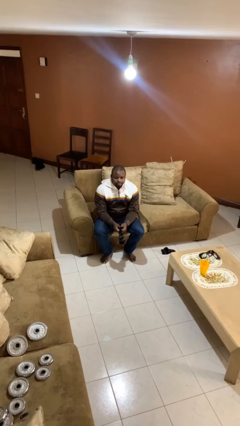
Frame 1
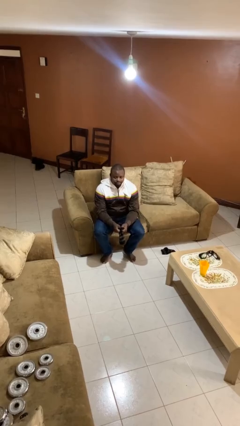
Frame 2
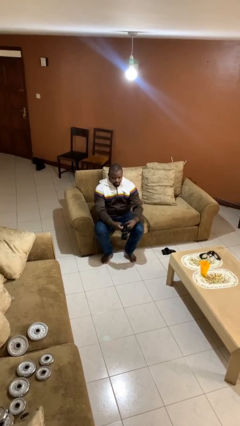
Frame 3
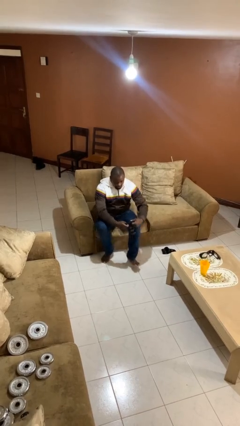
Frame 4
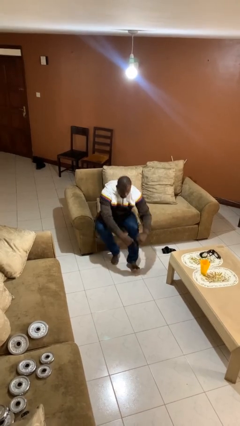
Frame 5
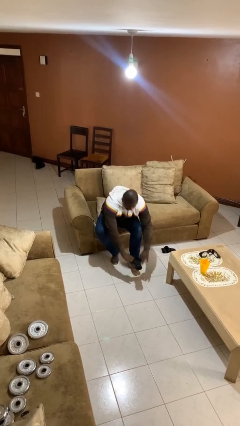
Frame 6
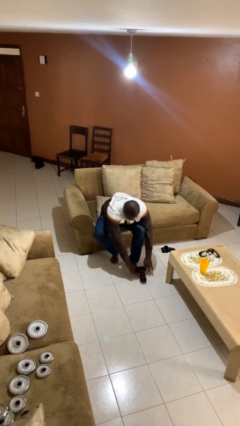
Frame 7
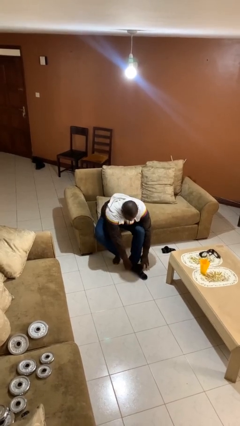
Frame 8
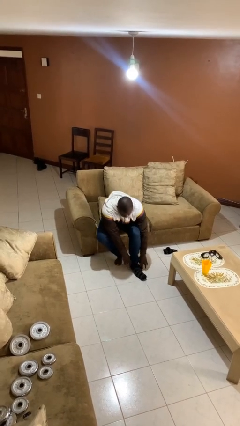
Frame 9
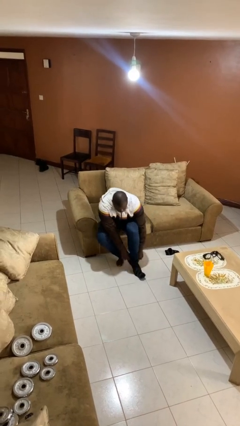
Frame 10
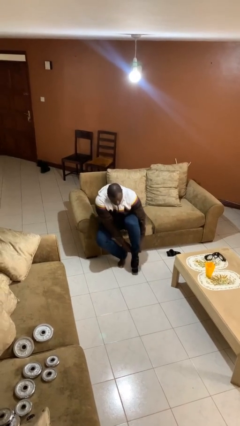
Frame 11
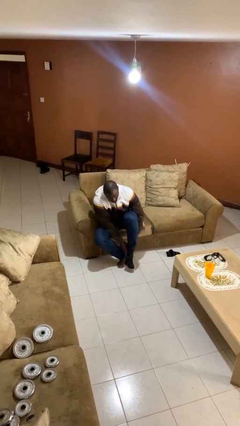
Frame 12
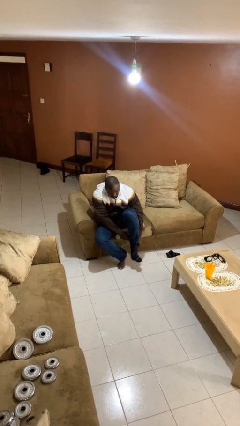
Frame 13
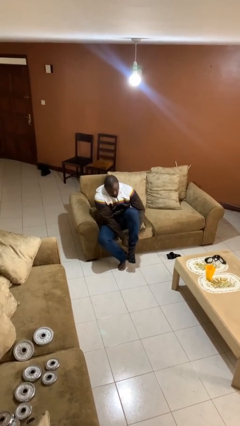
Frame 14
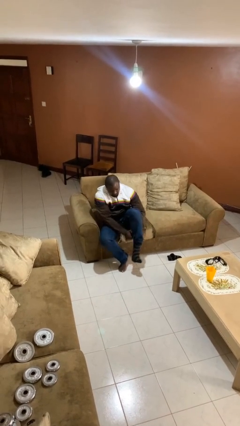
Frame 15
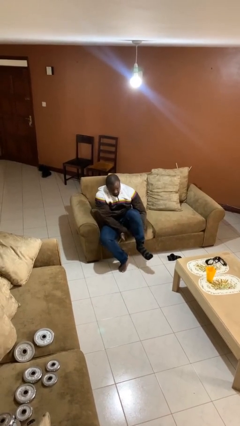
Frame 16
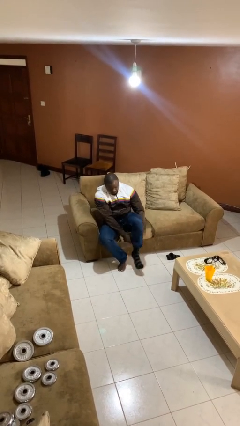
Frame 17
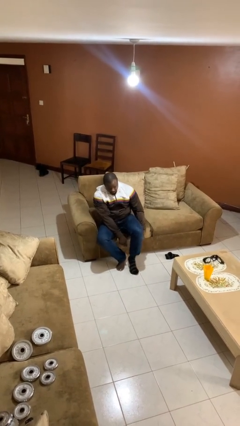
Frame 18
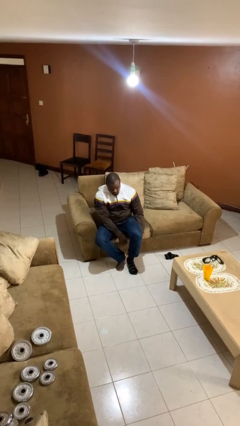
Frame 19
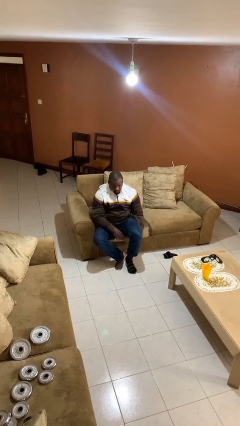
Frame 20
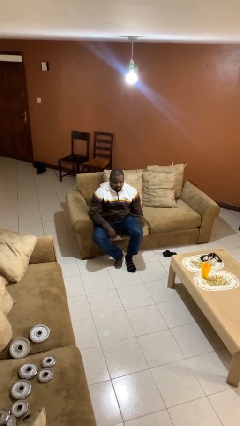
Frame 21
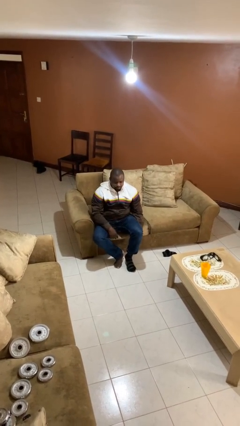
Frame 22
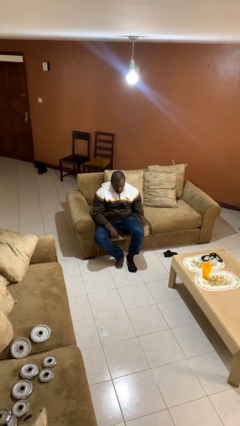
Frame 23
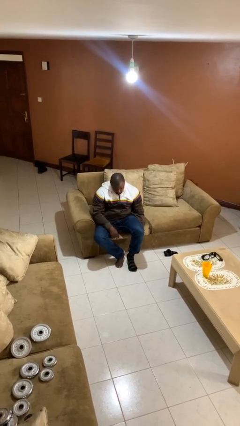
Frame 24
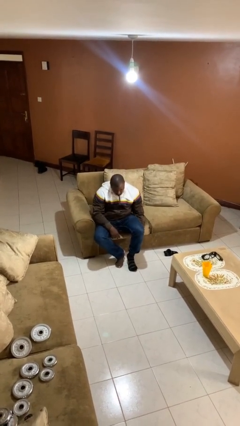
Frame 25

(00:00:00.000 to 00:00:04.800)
person puts on socks

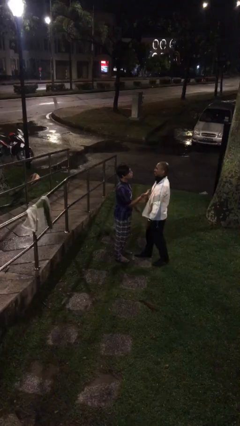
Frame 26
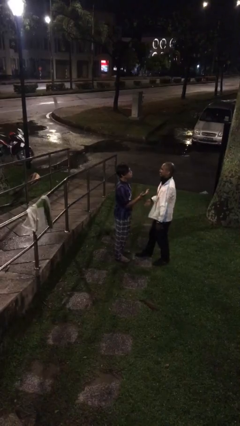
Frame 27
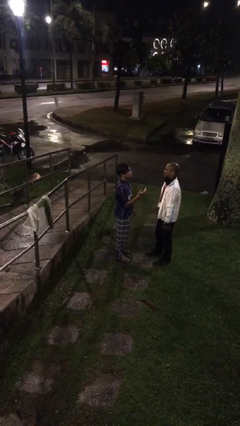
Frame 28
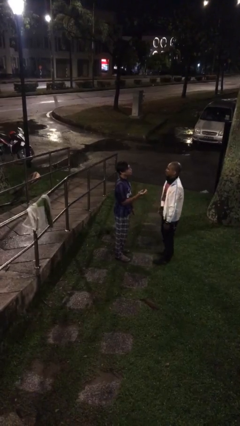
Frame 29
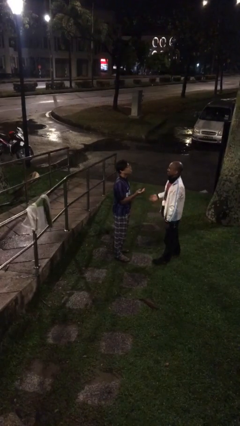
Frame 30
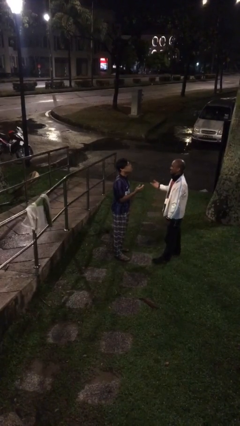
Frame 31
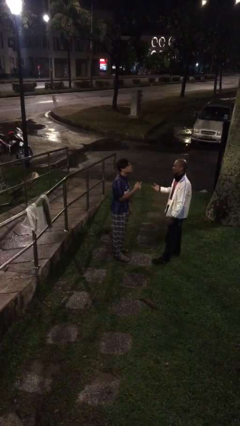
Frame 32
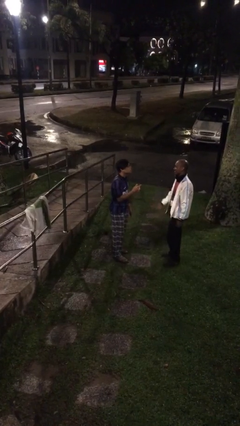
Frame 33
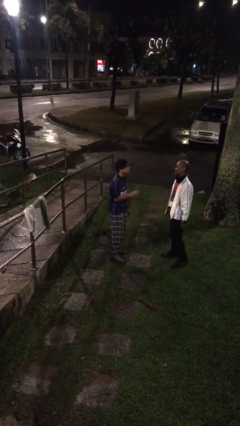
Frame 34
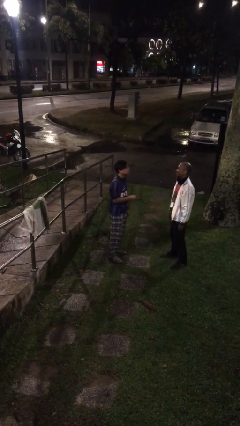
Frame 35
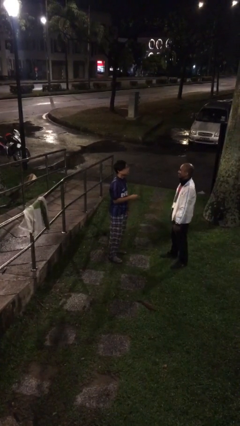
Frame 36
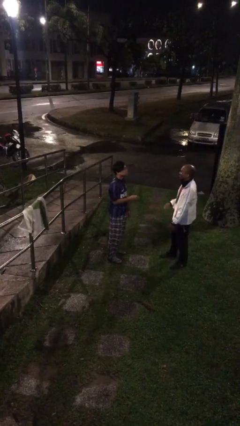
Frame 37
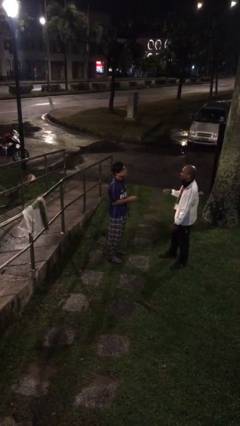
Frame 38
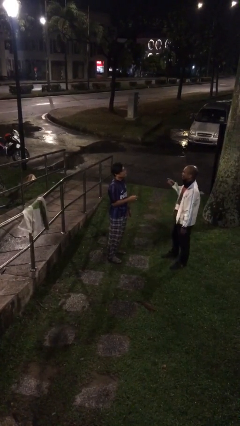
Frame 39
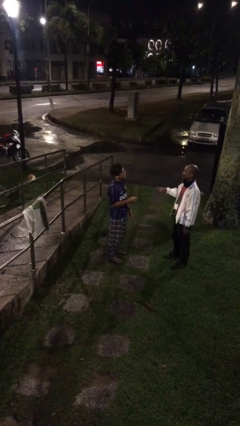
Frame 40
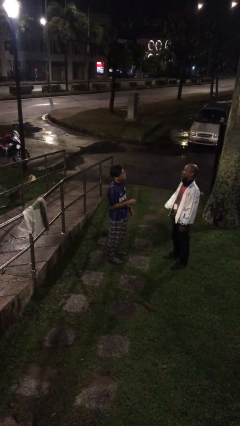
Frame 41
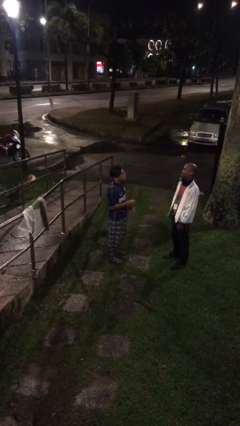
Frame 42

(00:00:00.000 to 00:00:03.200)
person talks to person

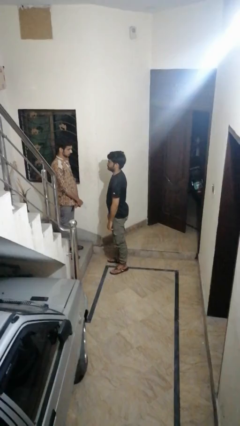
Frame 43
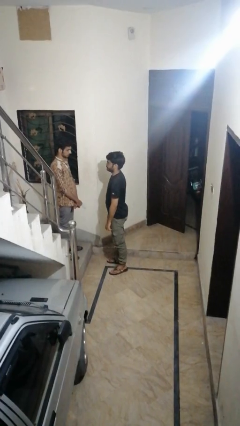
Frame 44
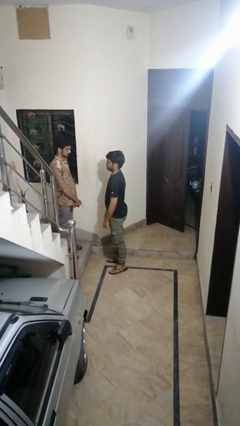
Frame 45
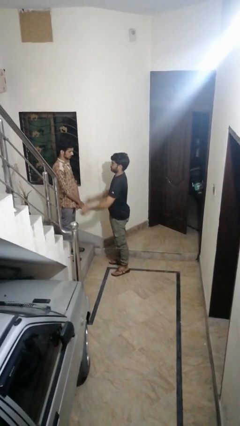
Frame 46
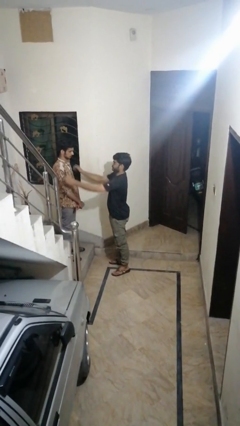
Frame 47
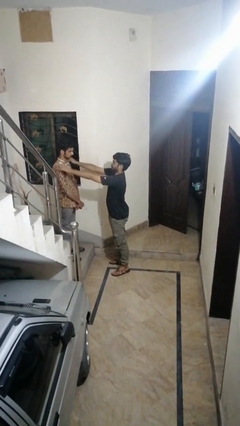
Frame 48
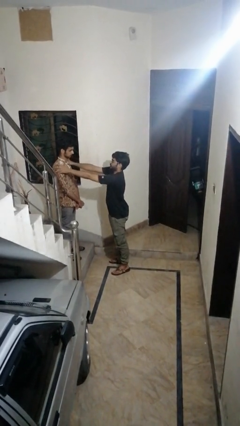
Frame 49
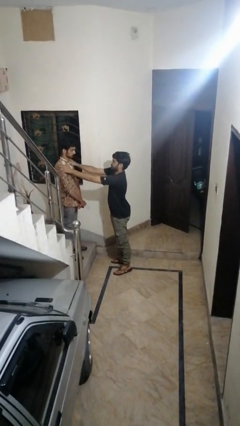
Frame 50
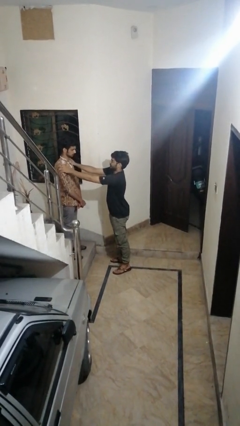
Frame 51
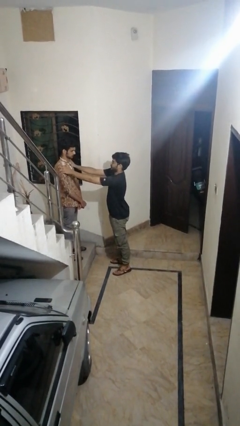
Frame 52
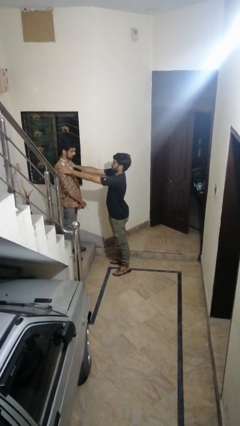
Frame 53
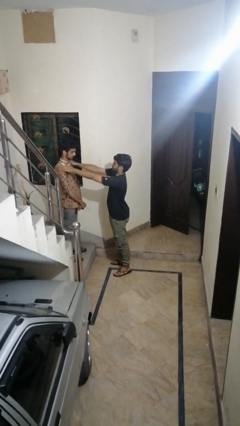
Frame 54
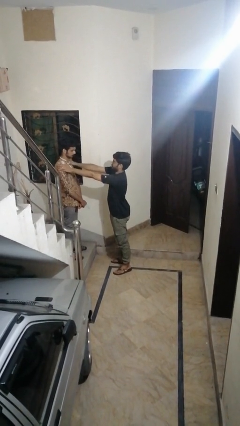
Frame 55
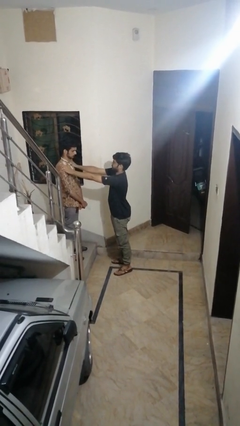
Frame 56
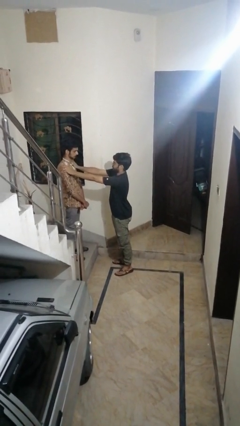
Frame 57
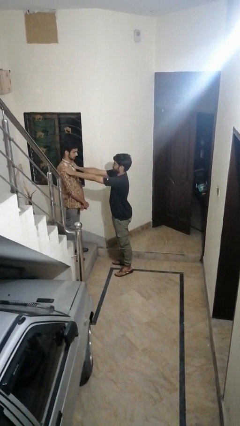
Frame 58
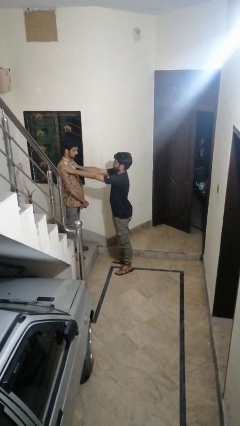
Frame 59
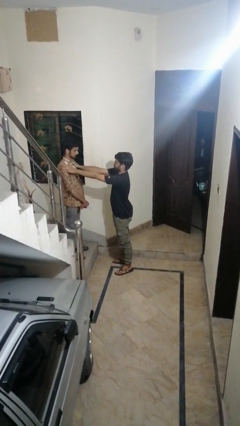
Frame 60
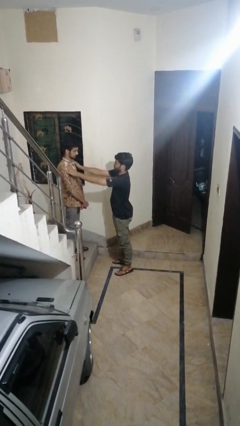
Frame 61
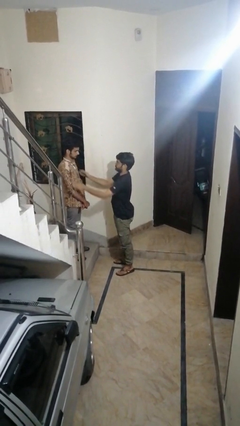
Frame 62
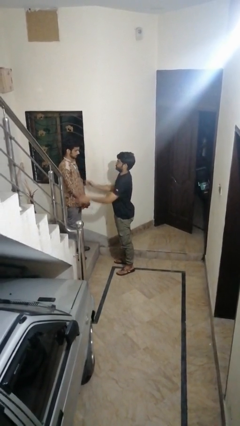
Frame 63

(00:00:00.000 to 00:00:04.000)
person pounds shoulders of person

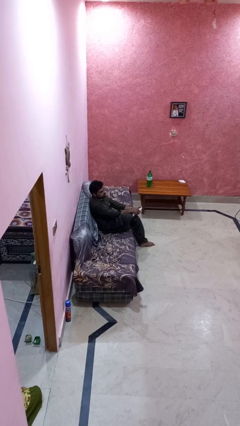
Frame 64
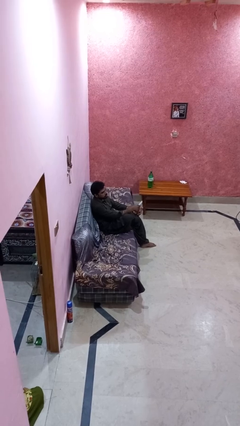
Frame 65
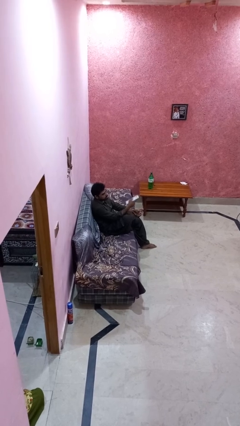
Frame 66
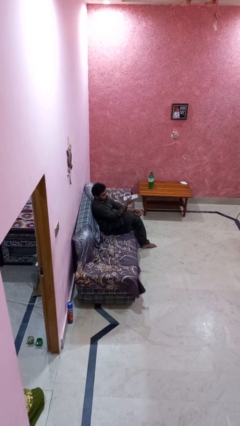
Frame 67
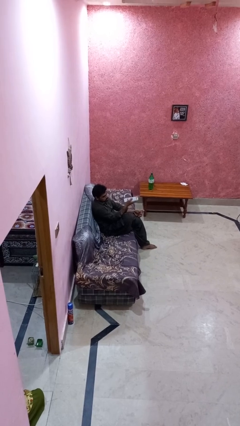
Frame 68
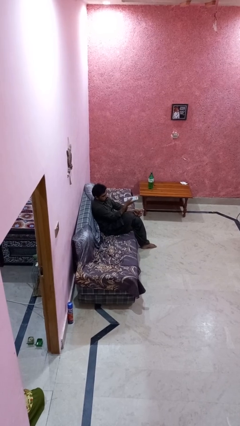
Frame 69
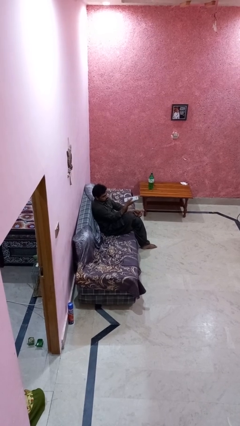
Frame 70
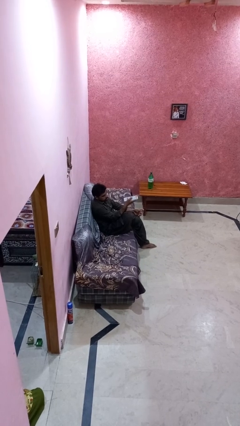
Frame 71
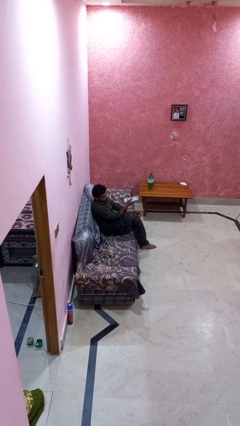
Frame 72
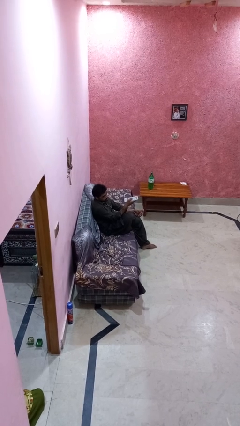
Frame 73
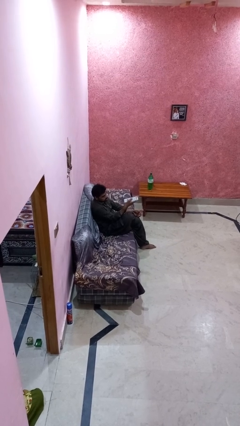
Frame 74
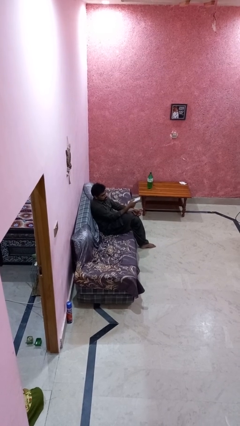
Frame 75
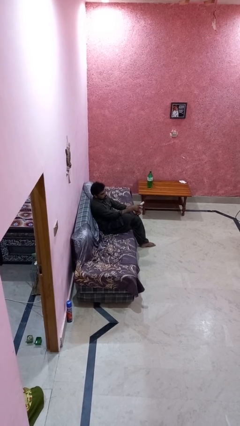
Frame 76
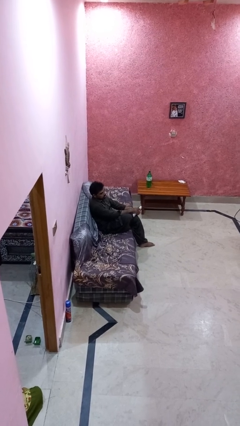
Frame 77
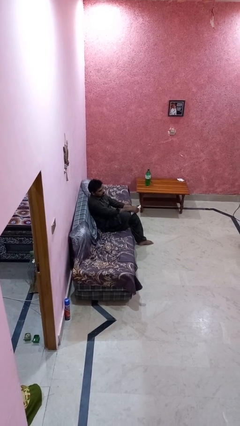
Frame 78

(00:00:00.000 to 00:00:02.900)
person uses television remote

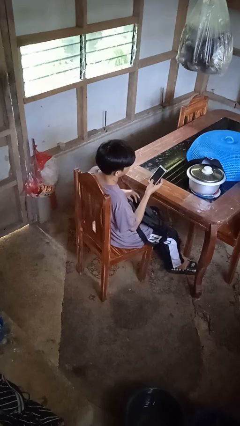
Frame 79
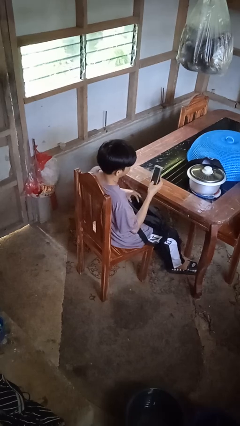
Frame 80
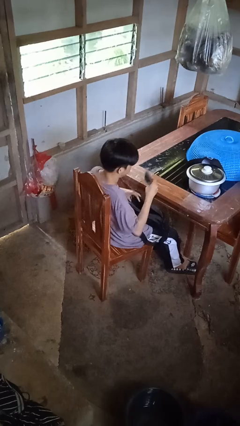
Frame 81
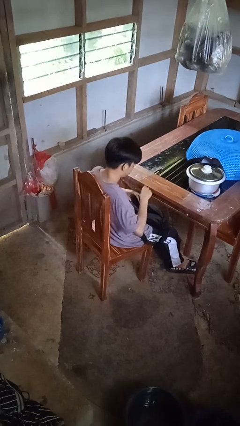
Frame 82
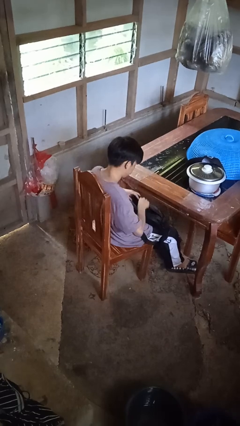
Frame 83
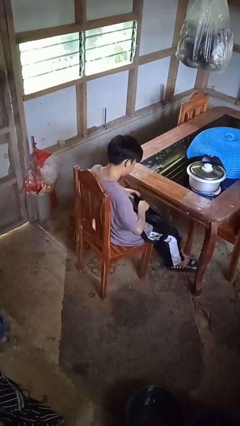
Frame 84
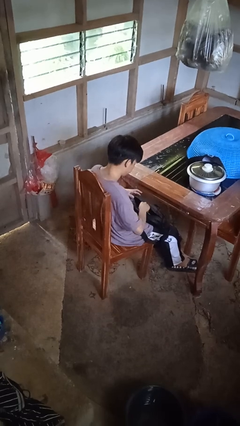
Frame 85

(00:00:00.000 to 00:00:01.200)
person puts object into purse

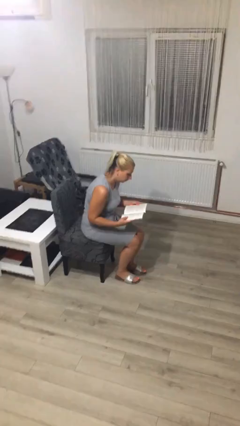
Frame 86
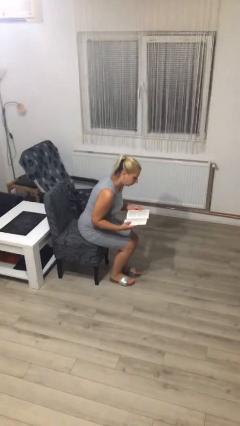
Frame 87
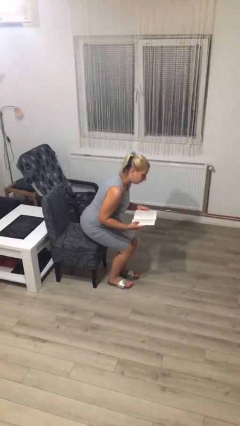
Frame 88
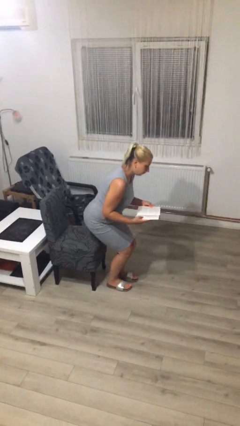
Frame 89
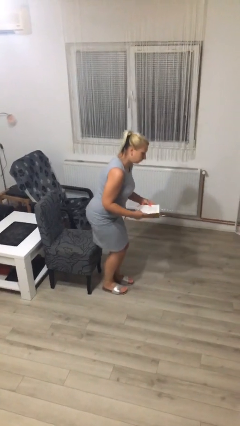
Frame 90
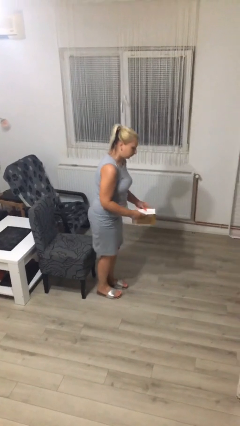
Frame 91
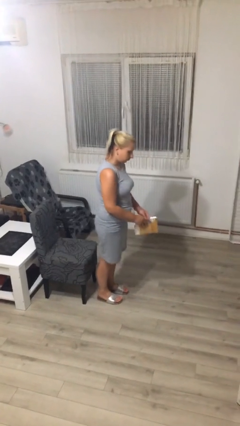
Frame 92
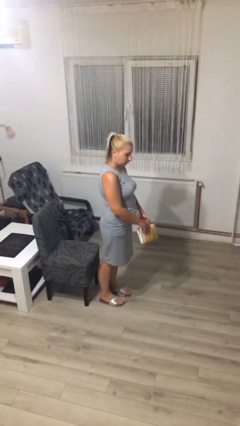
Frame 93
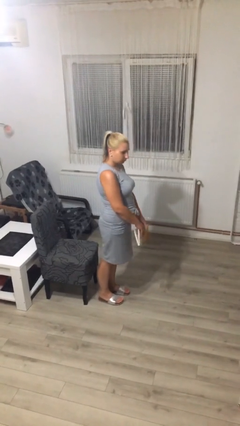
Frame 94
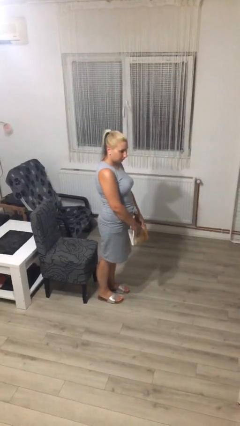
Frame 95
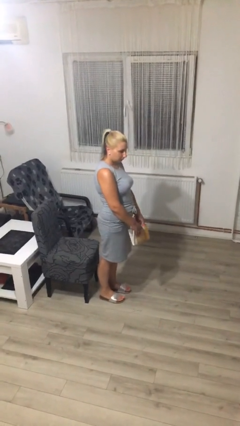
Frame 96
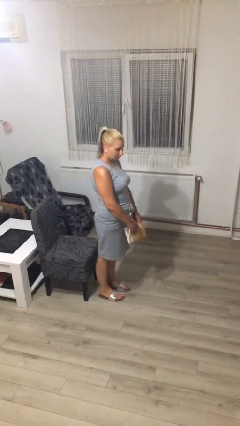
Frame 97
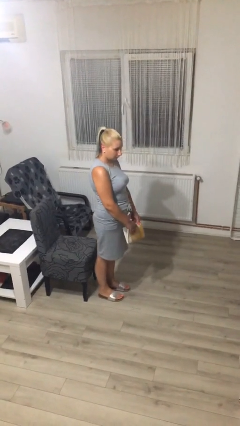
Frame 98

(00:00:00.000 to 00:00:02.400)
person stands up
